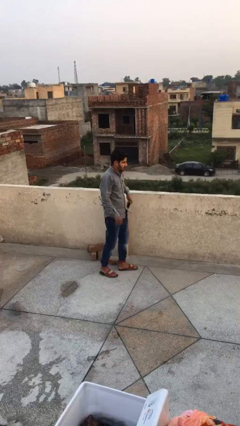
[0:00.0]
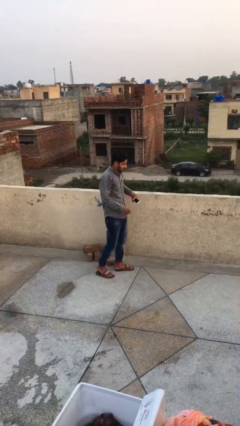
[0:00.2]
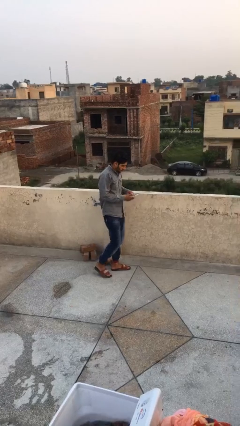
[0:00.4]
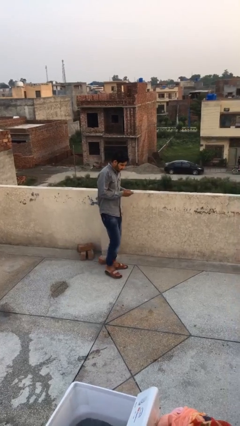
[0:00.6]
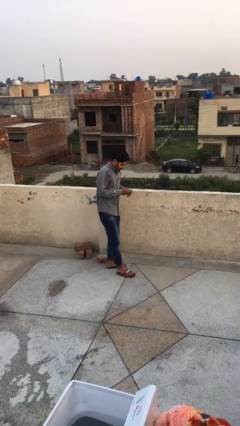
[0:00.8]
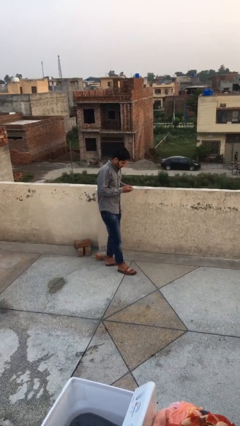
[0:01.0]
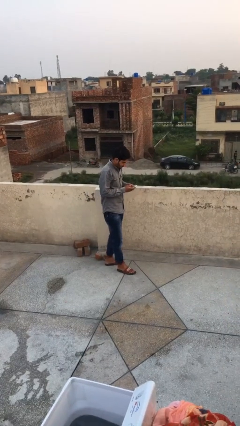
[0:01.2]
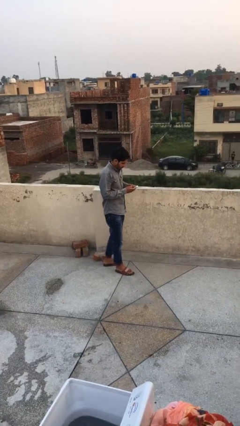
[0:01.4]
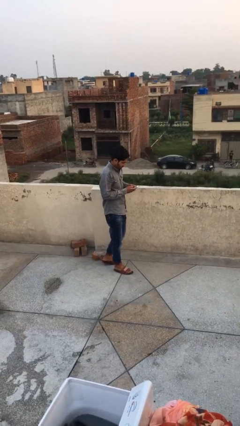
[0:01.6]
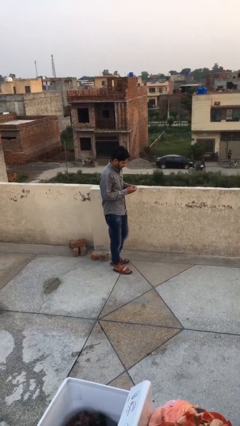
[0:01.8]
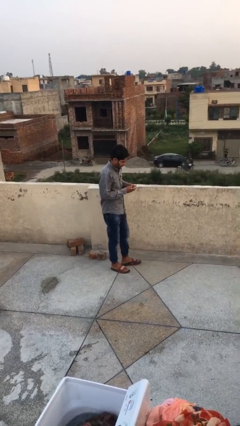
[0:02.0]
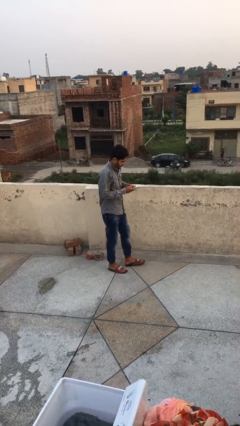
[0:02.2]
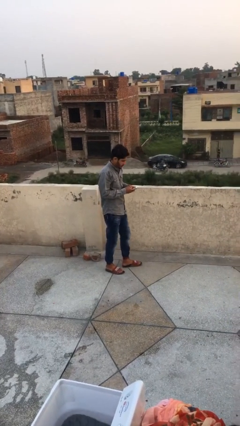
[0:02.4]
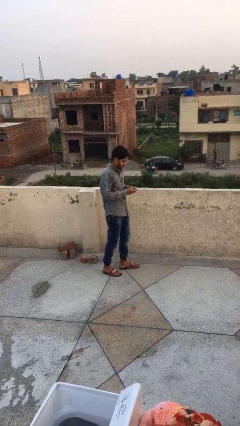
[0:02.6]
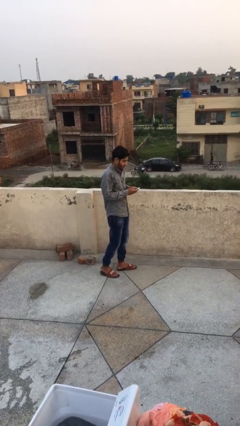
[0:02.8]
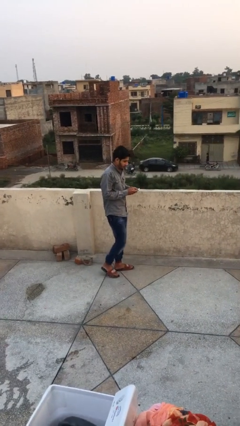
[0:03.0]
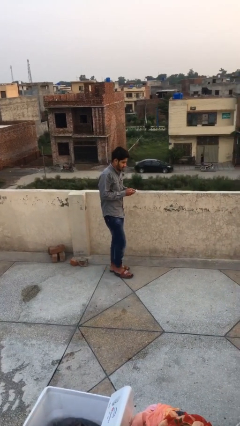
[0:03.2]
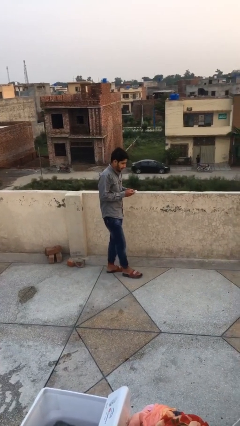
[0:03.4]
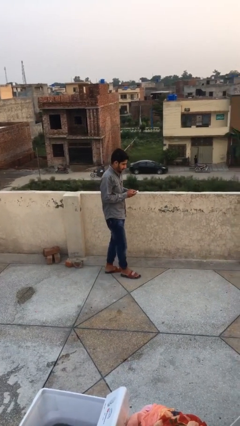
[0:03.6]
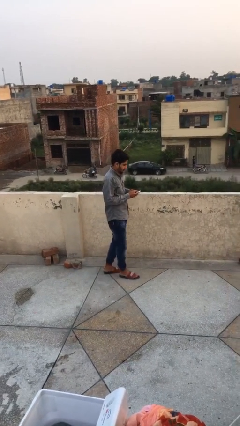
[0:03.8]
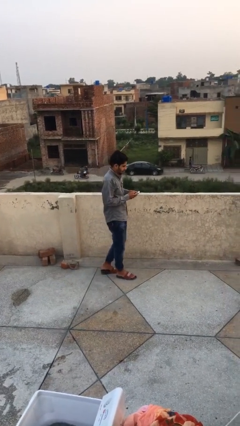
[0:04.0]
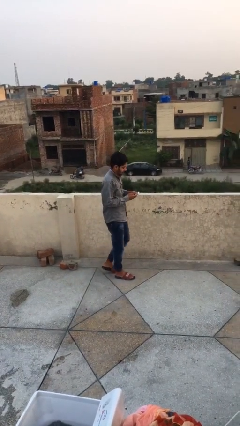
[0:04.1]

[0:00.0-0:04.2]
person texts on phone

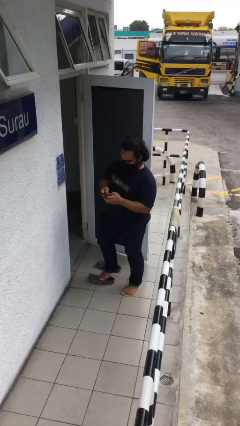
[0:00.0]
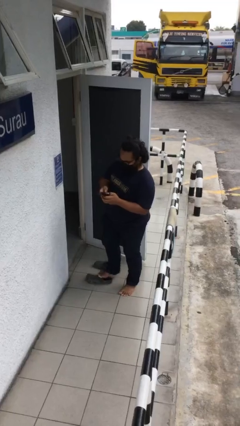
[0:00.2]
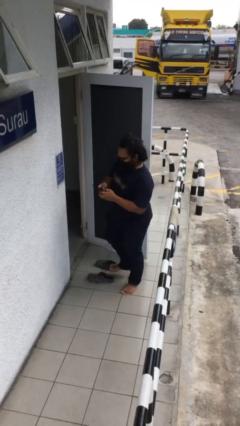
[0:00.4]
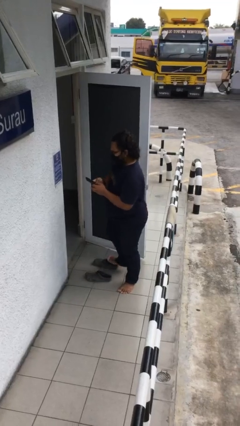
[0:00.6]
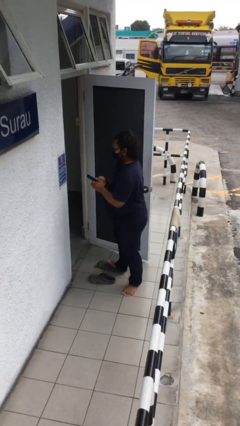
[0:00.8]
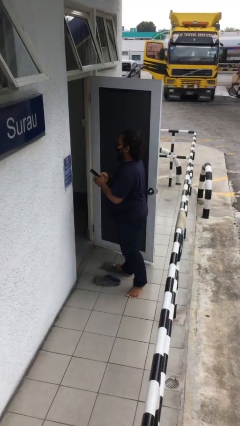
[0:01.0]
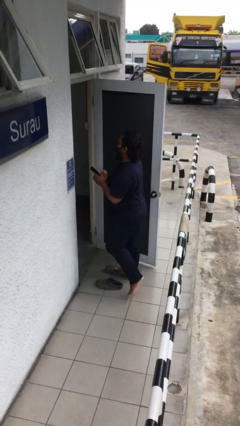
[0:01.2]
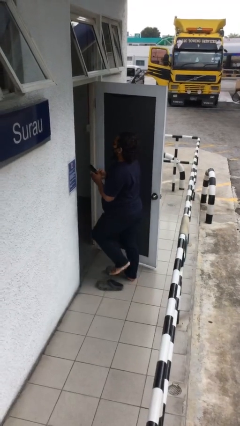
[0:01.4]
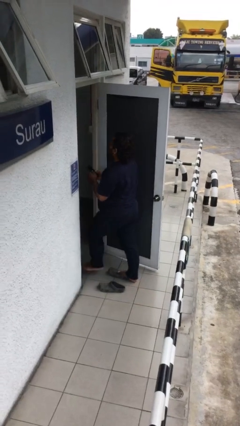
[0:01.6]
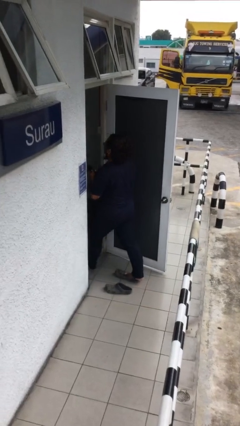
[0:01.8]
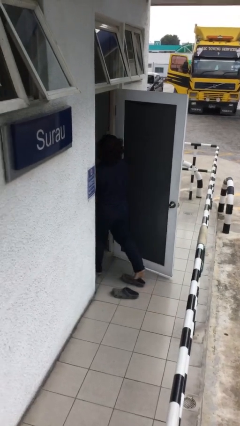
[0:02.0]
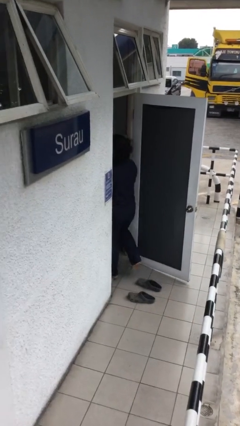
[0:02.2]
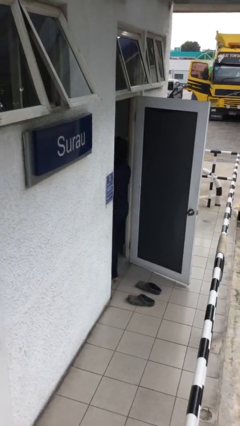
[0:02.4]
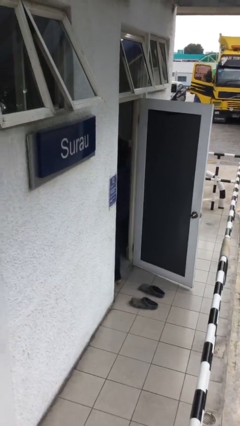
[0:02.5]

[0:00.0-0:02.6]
person exits scene through structure

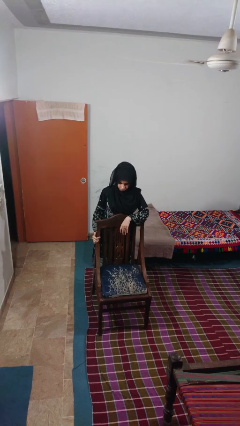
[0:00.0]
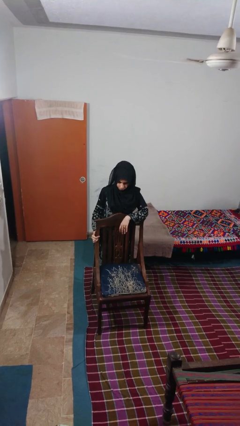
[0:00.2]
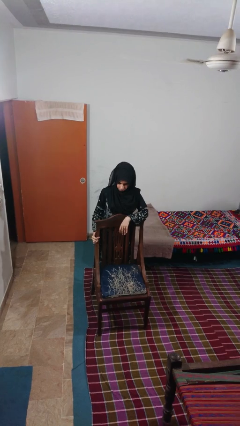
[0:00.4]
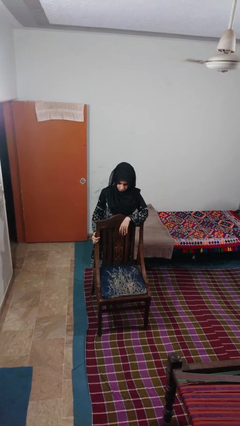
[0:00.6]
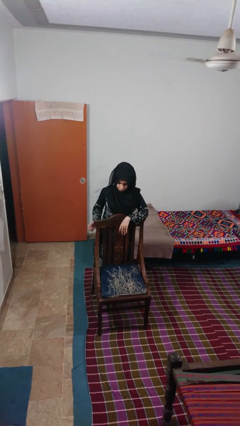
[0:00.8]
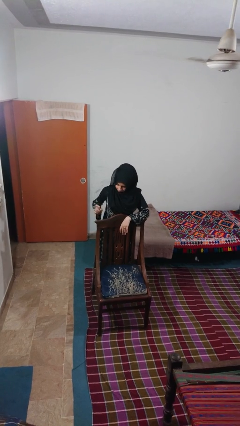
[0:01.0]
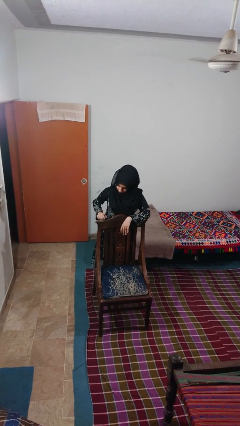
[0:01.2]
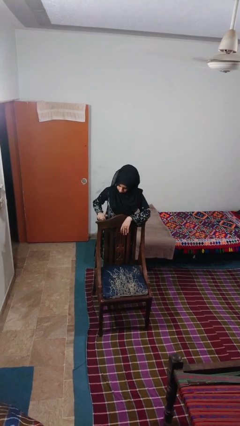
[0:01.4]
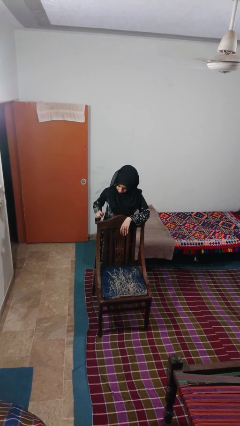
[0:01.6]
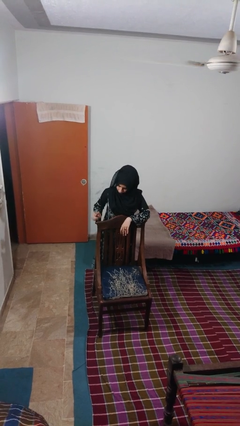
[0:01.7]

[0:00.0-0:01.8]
person taps object with finger

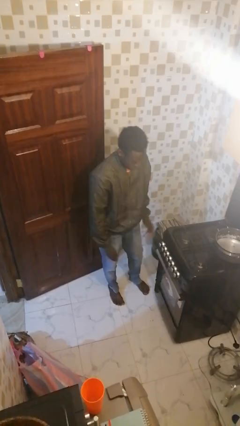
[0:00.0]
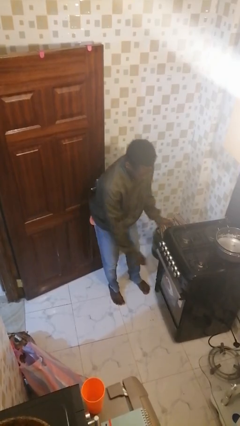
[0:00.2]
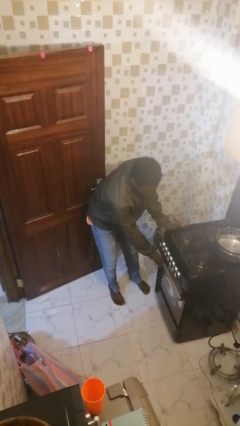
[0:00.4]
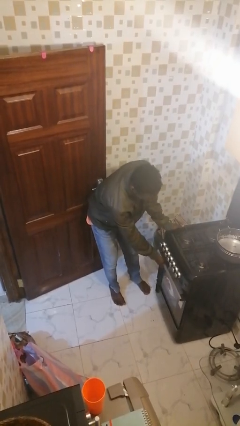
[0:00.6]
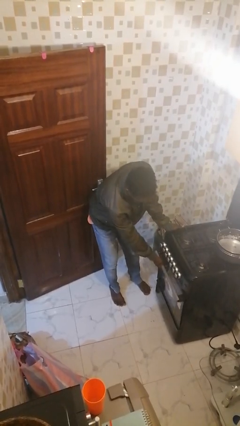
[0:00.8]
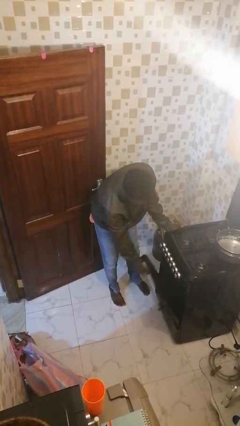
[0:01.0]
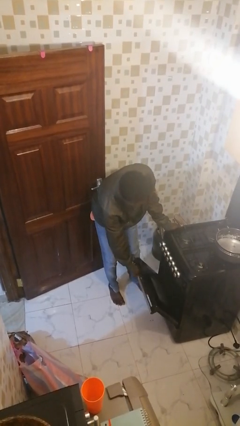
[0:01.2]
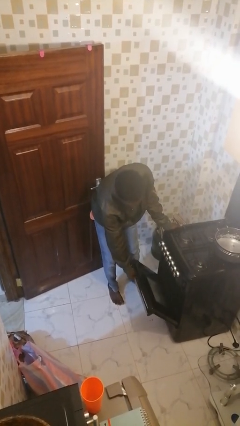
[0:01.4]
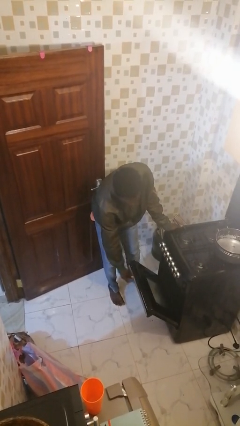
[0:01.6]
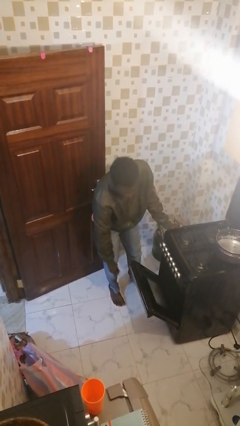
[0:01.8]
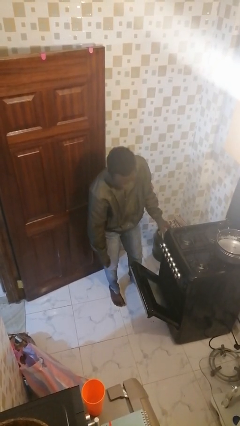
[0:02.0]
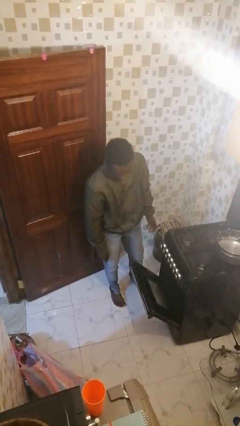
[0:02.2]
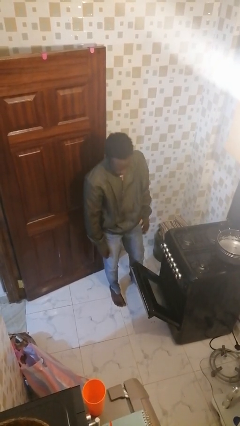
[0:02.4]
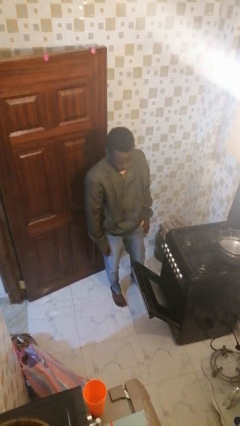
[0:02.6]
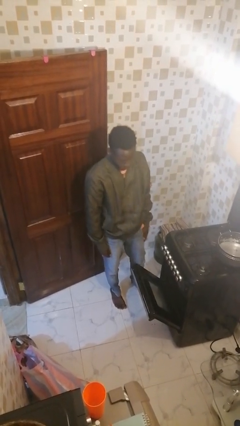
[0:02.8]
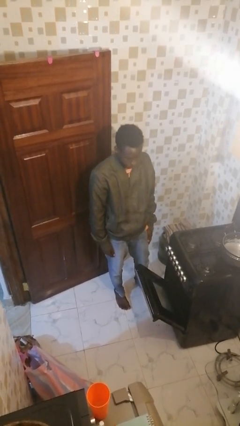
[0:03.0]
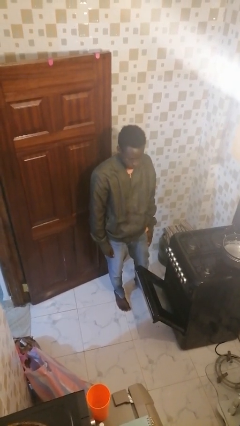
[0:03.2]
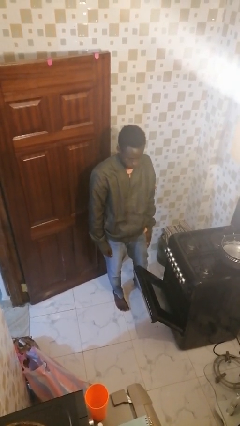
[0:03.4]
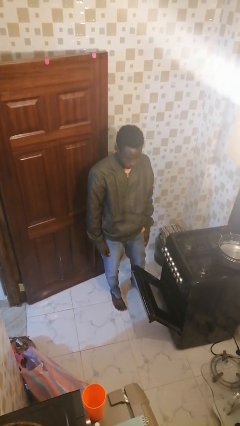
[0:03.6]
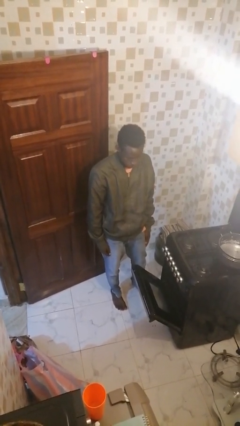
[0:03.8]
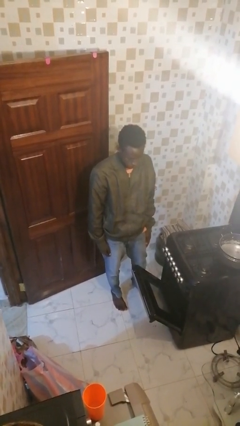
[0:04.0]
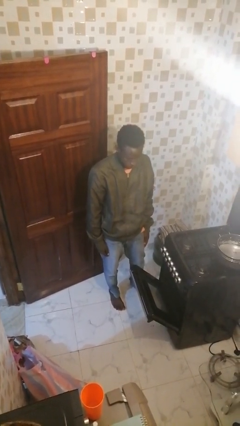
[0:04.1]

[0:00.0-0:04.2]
person opens oven door

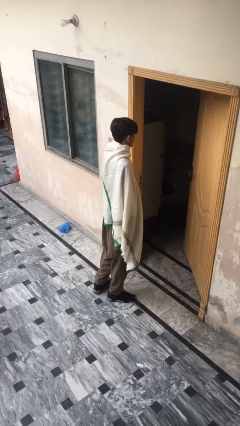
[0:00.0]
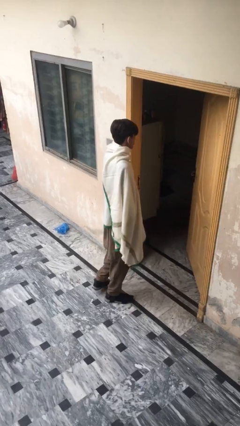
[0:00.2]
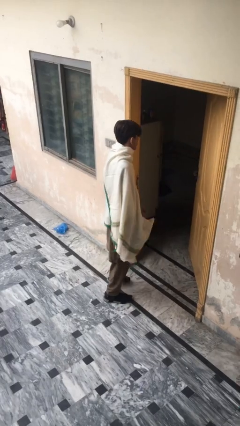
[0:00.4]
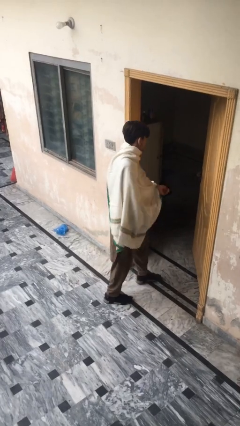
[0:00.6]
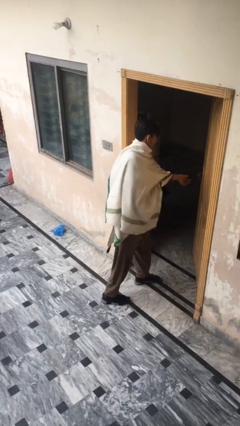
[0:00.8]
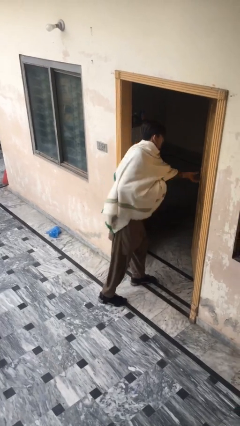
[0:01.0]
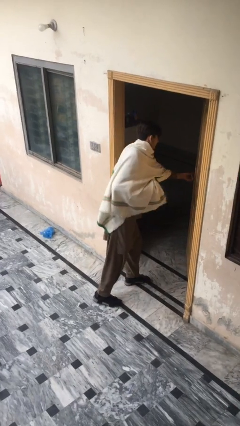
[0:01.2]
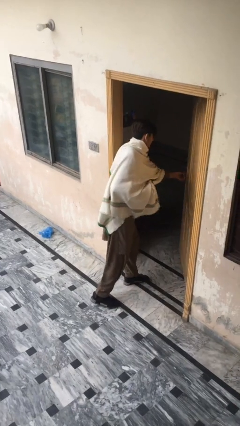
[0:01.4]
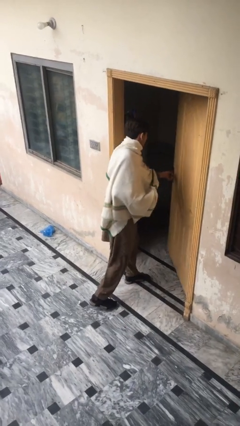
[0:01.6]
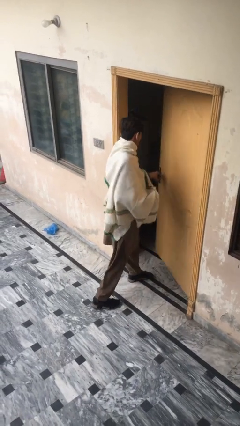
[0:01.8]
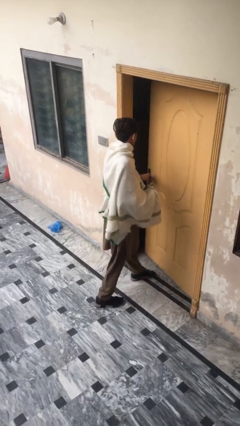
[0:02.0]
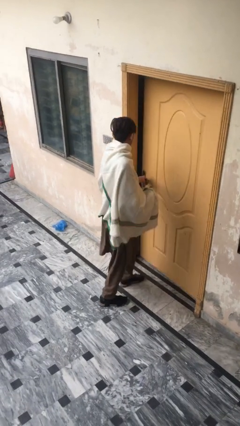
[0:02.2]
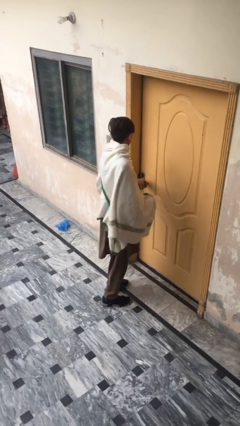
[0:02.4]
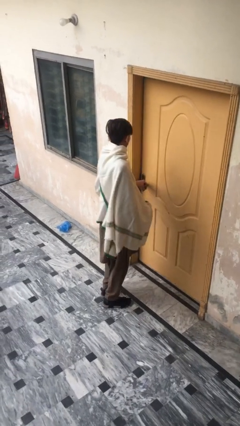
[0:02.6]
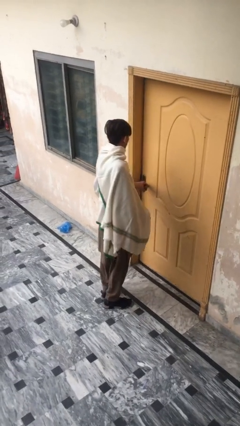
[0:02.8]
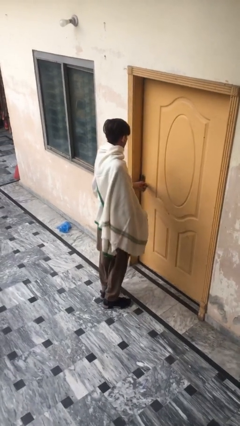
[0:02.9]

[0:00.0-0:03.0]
person closes facility door

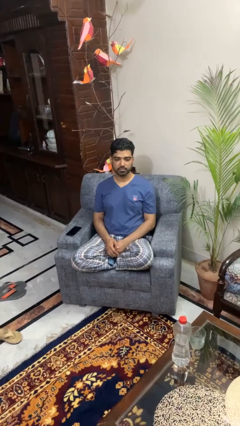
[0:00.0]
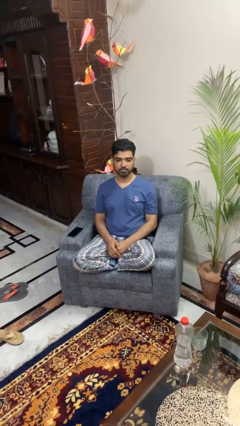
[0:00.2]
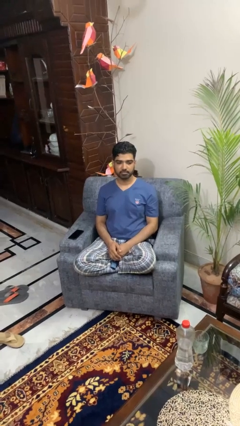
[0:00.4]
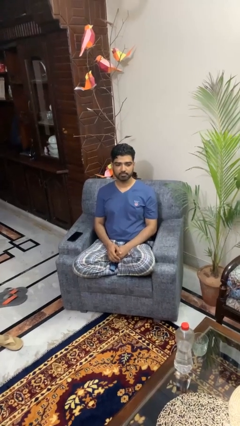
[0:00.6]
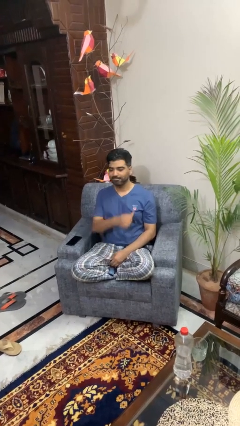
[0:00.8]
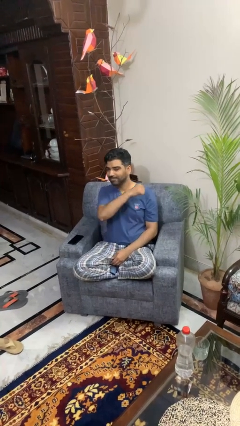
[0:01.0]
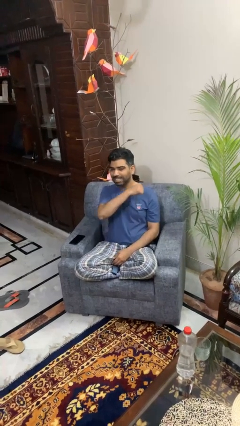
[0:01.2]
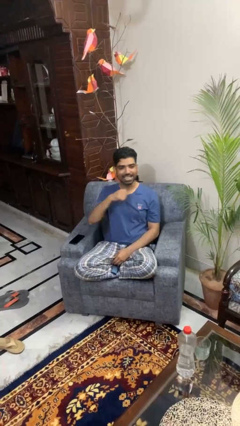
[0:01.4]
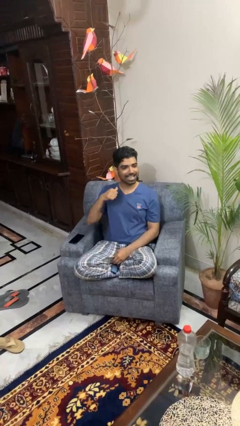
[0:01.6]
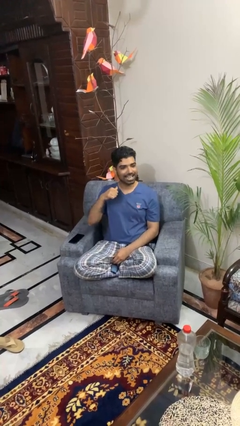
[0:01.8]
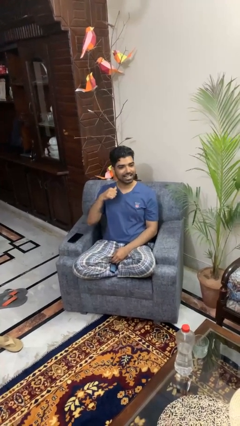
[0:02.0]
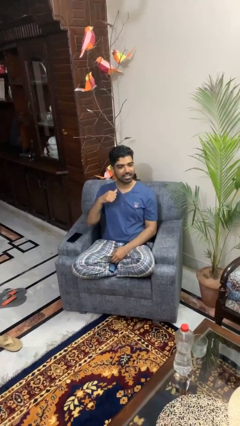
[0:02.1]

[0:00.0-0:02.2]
person gestures cut
